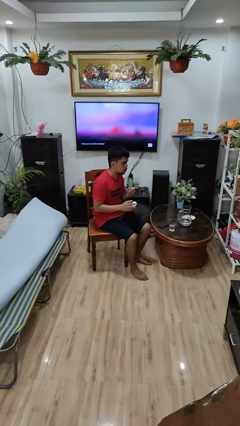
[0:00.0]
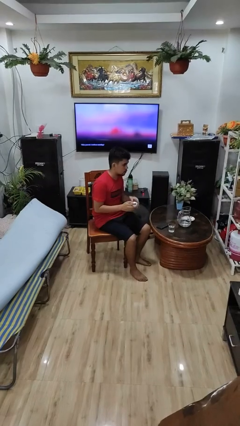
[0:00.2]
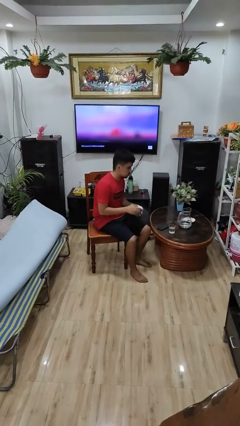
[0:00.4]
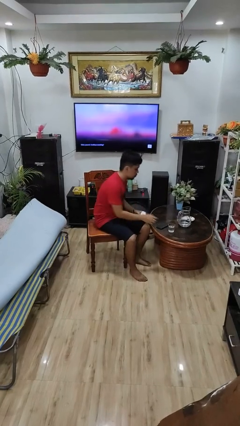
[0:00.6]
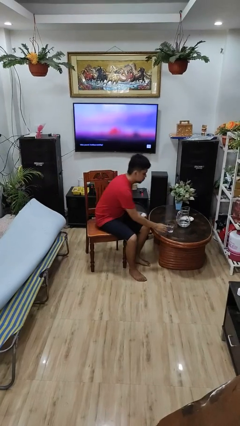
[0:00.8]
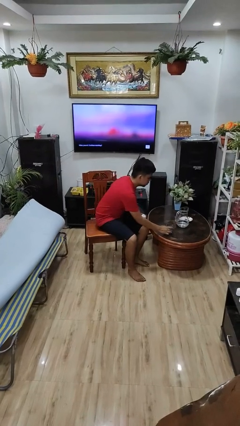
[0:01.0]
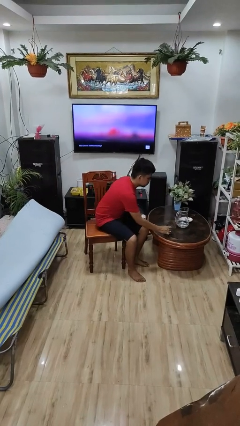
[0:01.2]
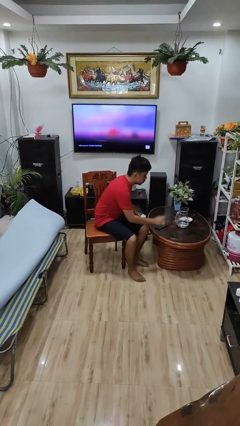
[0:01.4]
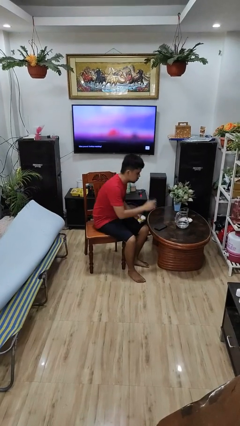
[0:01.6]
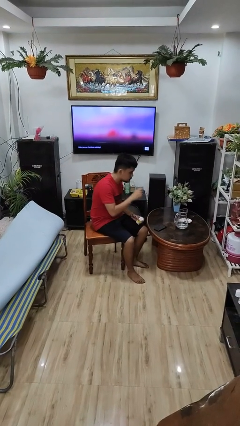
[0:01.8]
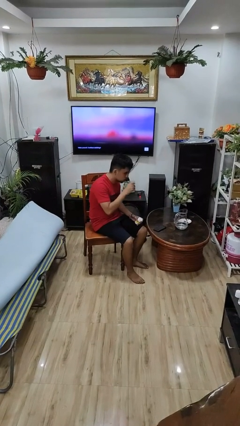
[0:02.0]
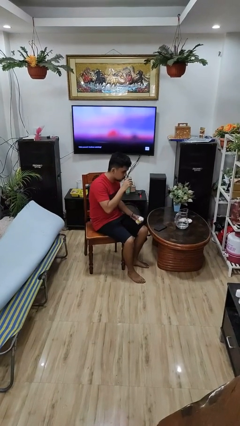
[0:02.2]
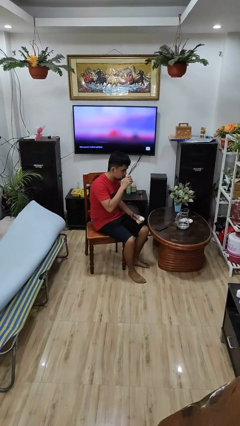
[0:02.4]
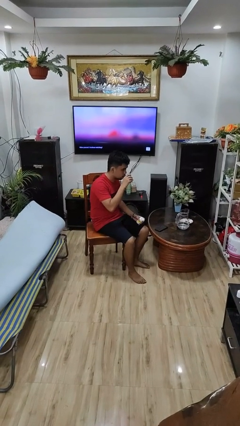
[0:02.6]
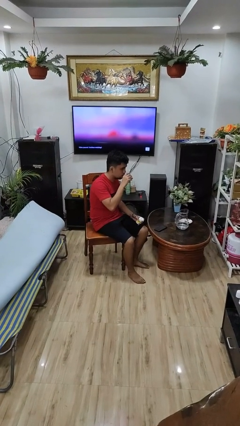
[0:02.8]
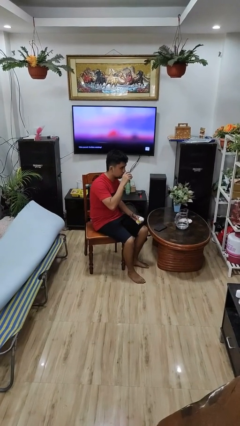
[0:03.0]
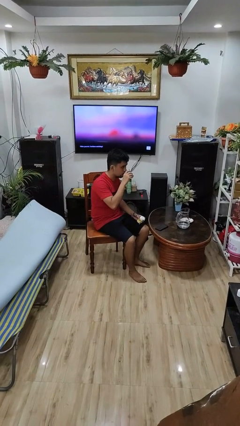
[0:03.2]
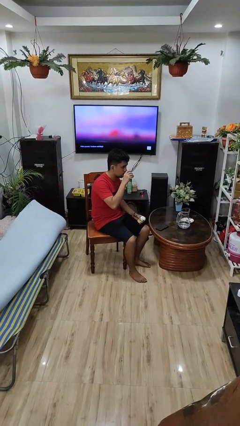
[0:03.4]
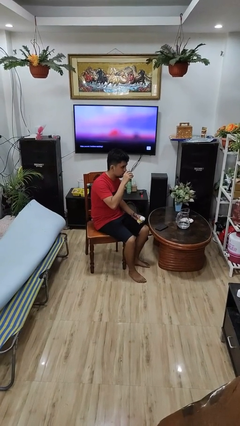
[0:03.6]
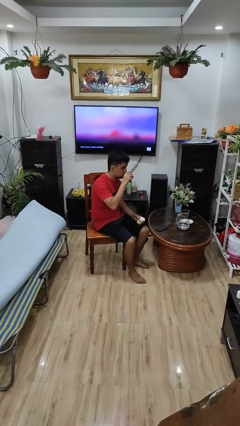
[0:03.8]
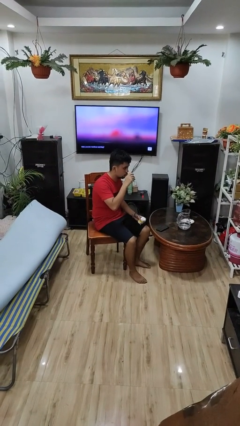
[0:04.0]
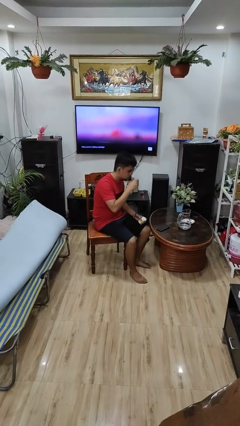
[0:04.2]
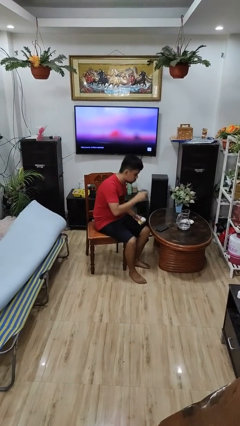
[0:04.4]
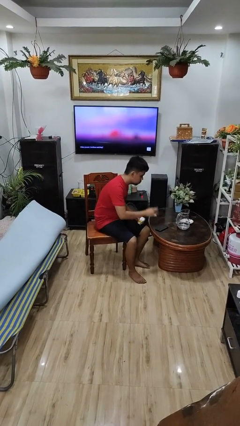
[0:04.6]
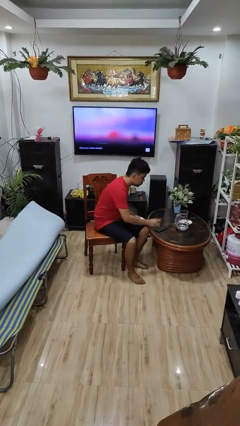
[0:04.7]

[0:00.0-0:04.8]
person drinks from cup

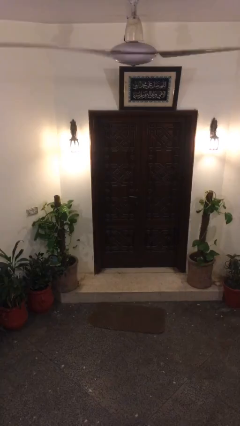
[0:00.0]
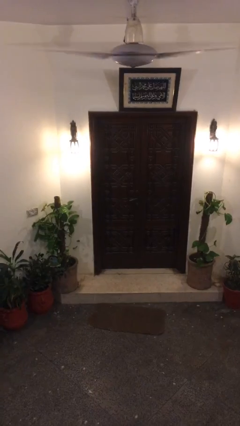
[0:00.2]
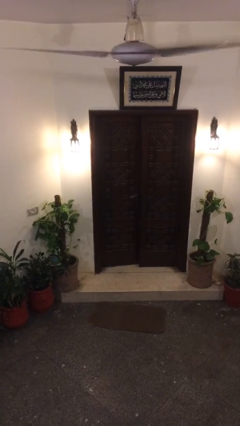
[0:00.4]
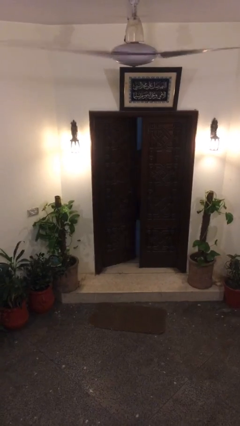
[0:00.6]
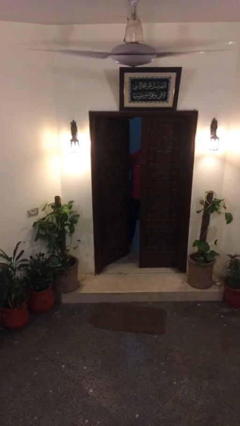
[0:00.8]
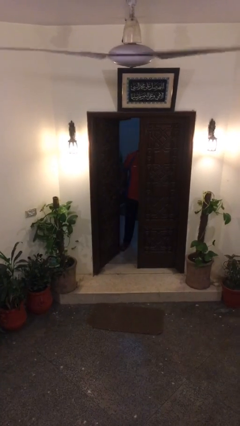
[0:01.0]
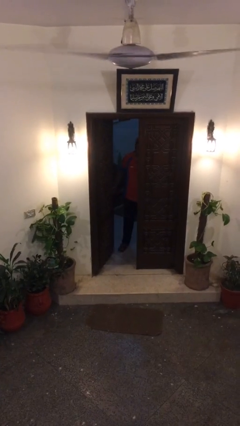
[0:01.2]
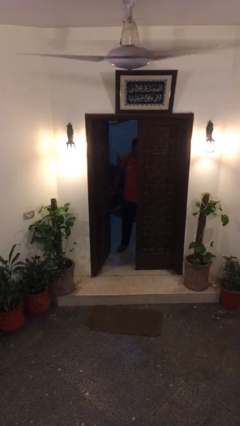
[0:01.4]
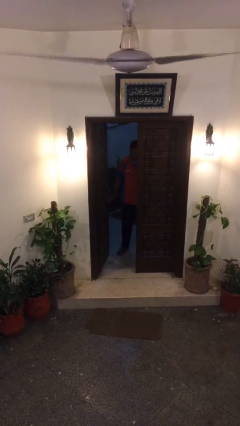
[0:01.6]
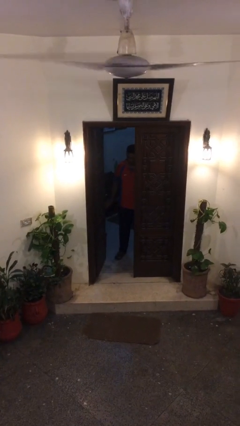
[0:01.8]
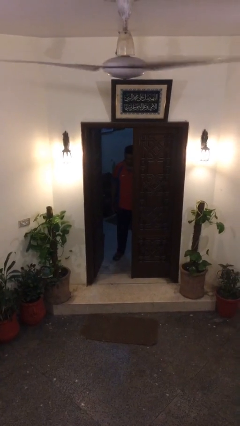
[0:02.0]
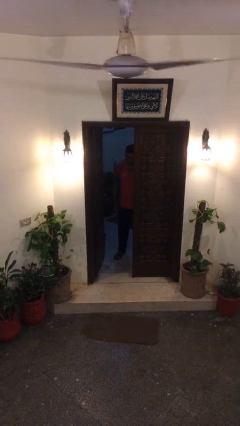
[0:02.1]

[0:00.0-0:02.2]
person opens facility door

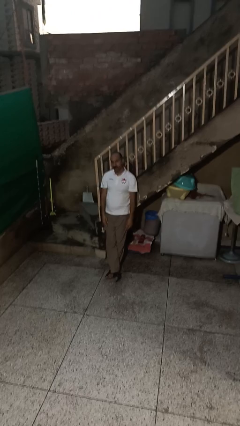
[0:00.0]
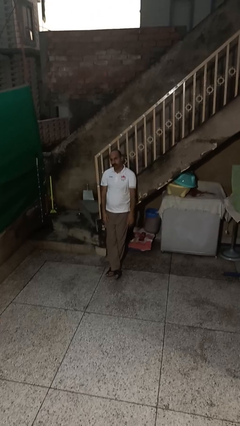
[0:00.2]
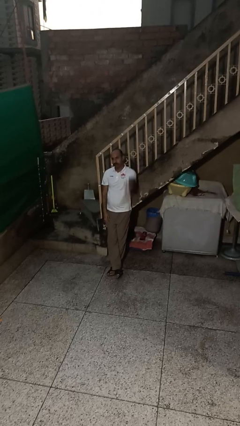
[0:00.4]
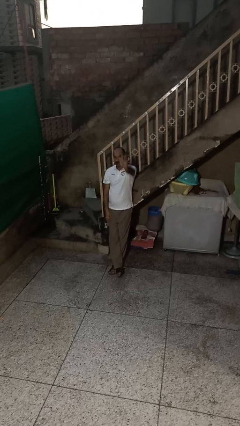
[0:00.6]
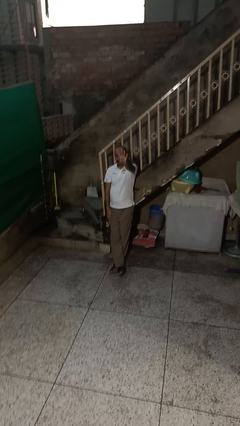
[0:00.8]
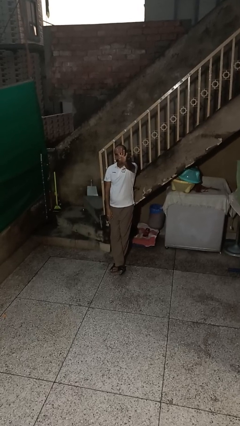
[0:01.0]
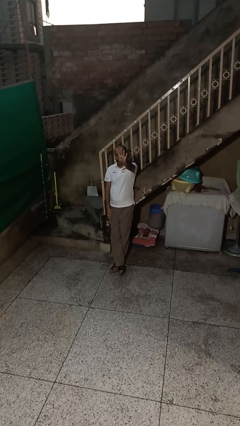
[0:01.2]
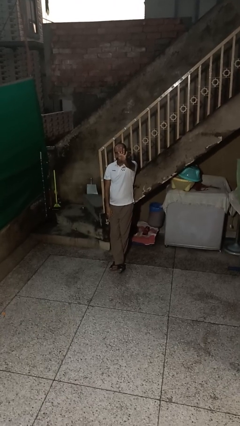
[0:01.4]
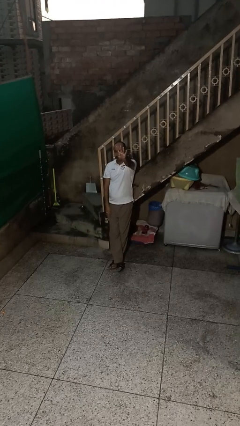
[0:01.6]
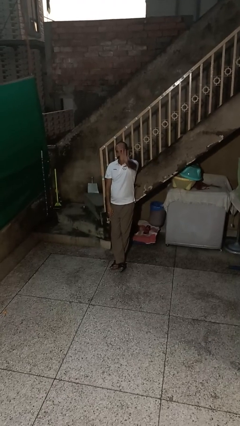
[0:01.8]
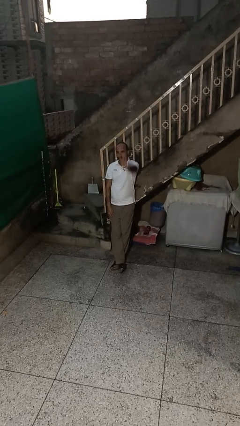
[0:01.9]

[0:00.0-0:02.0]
person gestures number four

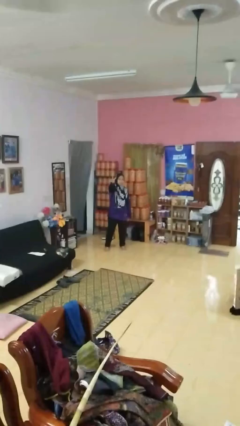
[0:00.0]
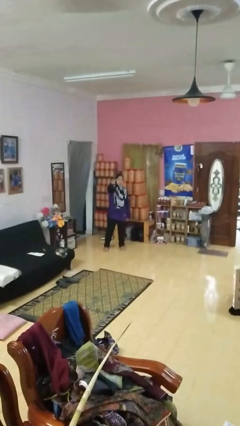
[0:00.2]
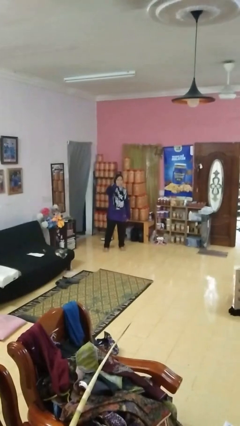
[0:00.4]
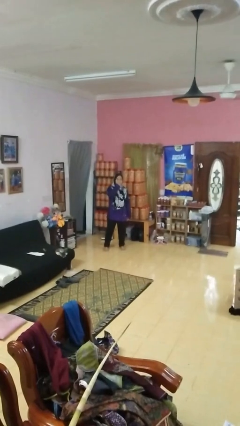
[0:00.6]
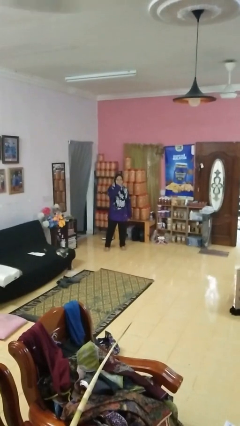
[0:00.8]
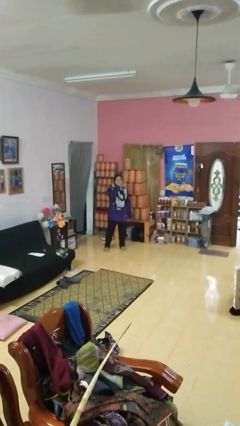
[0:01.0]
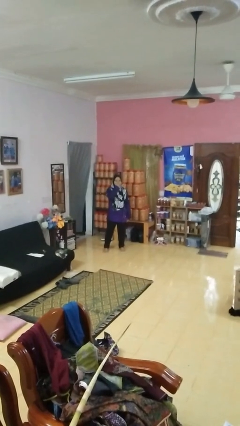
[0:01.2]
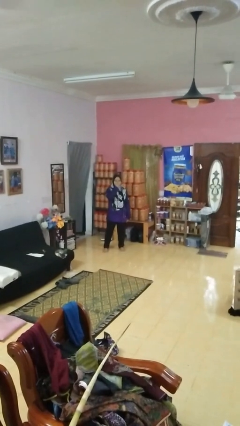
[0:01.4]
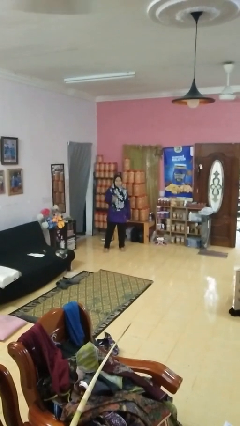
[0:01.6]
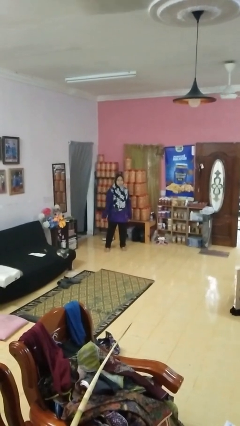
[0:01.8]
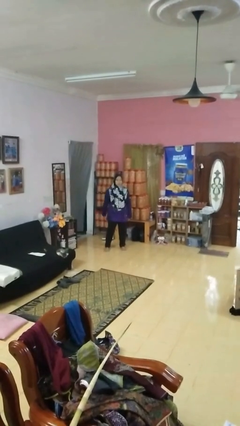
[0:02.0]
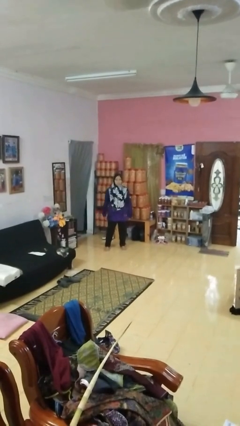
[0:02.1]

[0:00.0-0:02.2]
person gestures watch closely

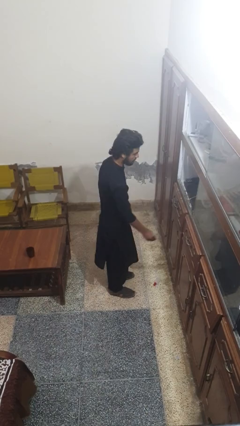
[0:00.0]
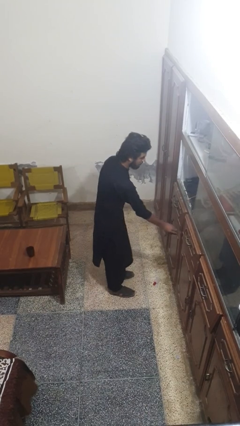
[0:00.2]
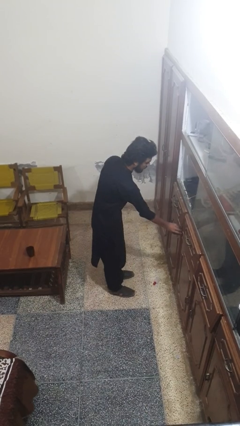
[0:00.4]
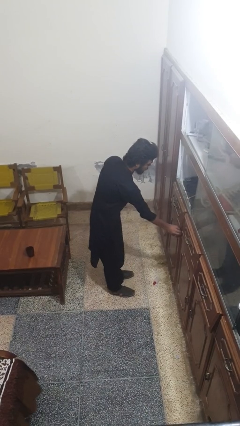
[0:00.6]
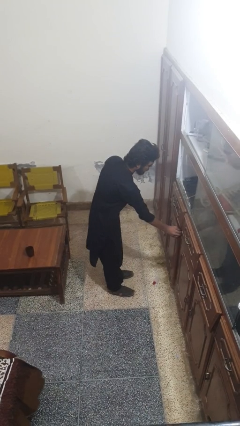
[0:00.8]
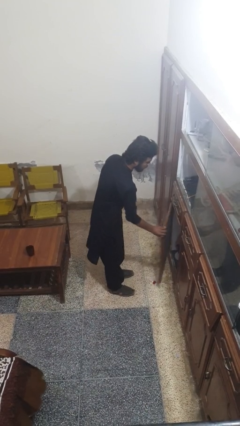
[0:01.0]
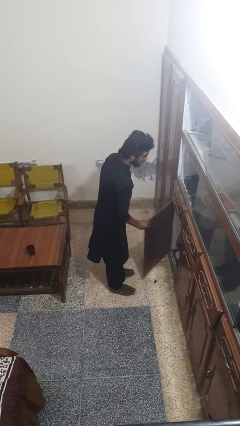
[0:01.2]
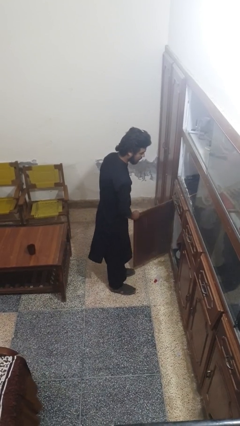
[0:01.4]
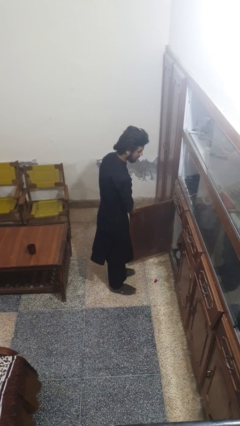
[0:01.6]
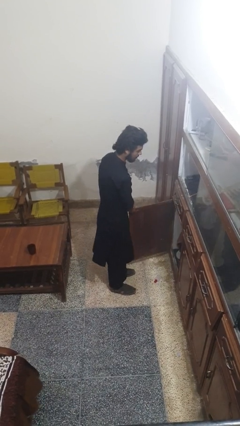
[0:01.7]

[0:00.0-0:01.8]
person opens cabinet

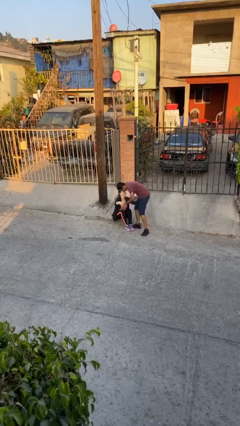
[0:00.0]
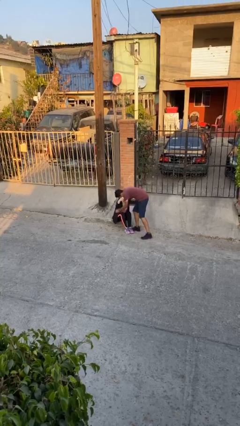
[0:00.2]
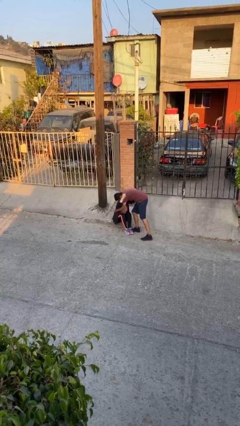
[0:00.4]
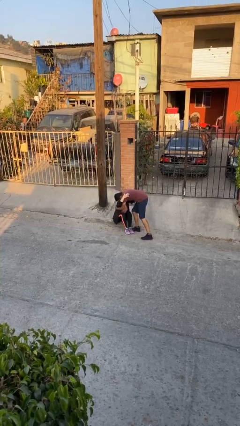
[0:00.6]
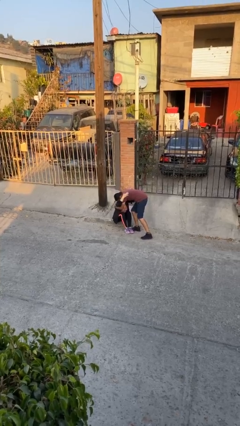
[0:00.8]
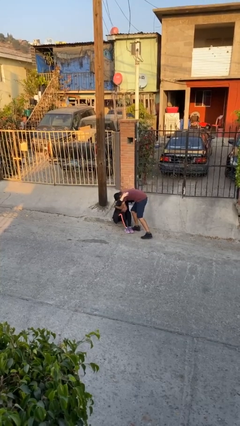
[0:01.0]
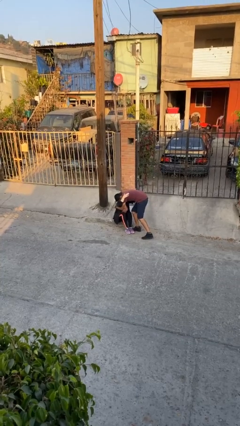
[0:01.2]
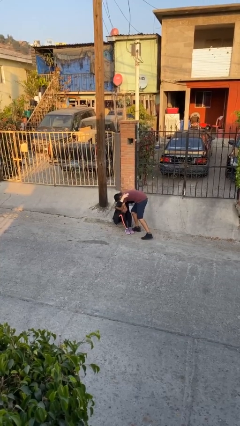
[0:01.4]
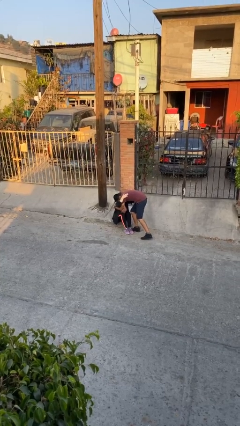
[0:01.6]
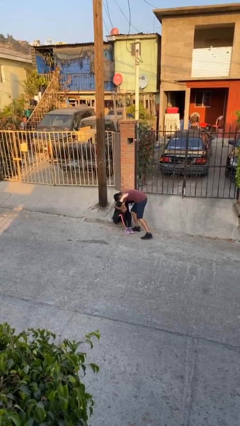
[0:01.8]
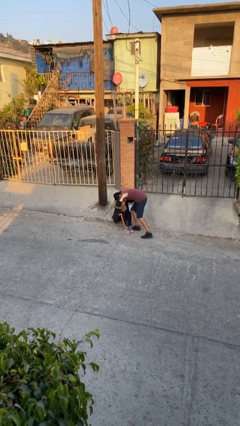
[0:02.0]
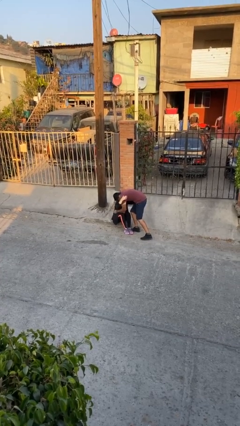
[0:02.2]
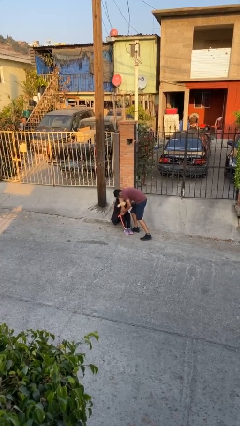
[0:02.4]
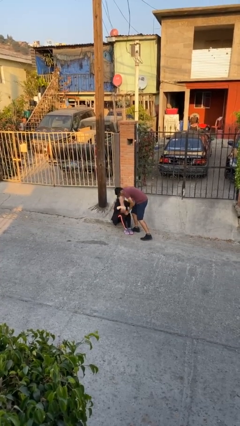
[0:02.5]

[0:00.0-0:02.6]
person embraces person

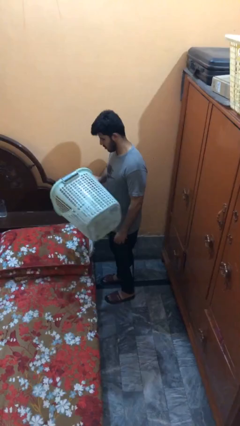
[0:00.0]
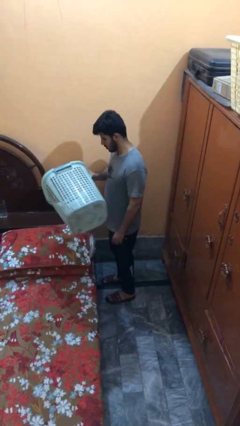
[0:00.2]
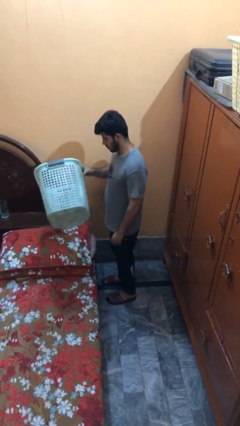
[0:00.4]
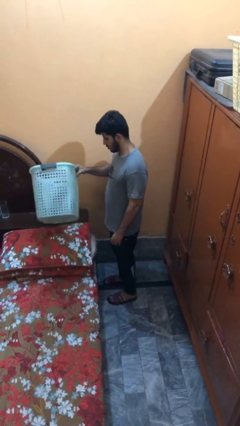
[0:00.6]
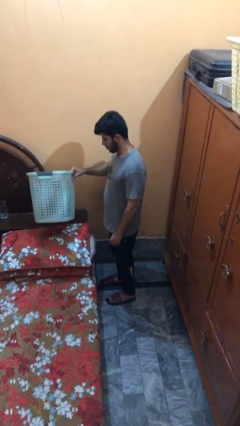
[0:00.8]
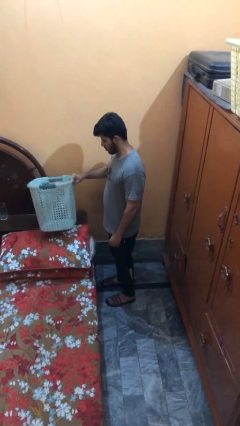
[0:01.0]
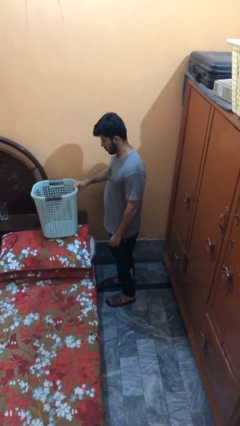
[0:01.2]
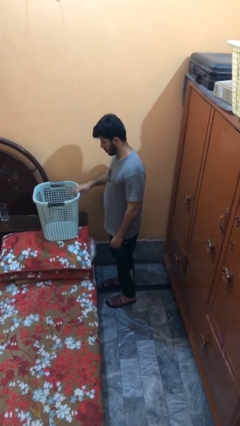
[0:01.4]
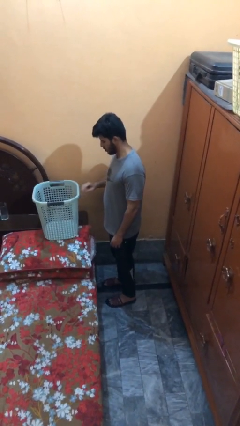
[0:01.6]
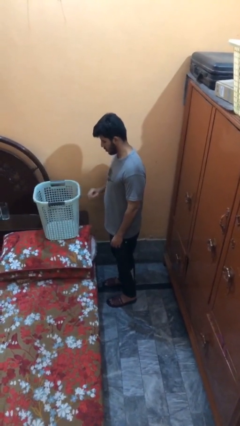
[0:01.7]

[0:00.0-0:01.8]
person puts down object on bed
